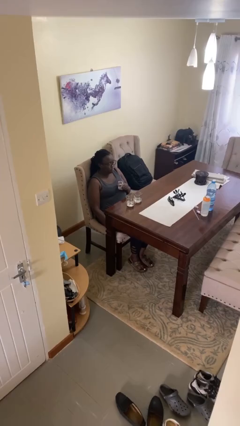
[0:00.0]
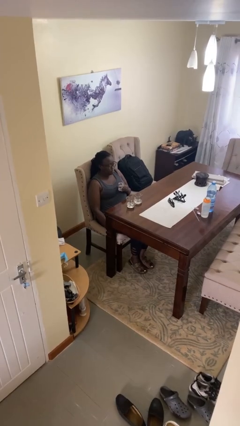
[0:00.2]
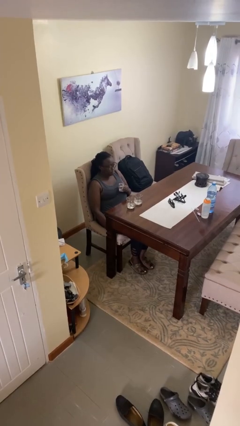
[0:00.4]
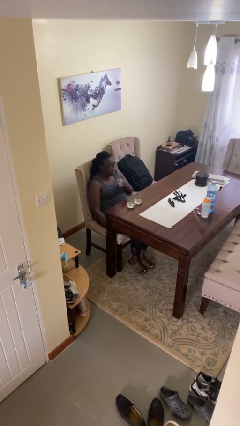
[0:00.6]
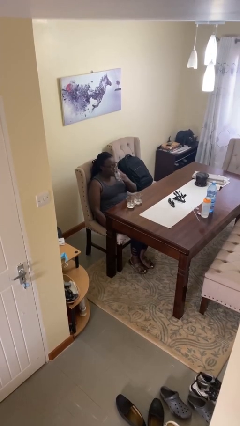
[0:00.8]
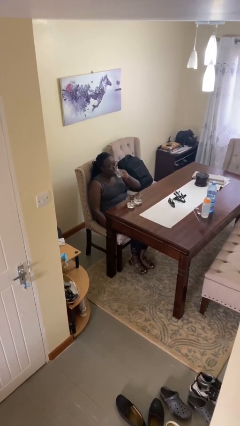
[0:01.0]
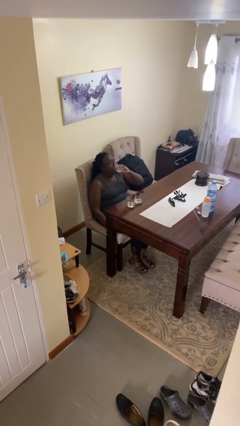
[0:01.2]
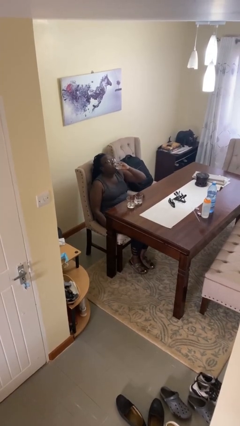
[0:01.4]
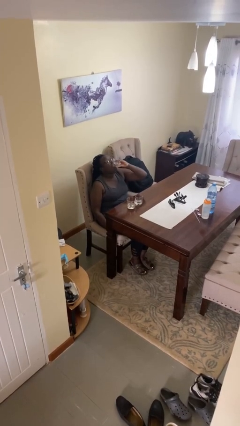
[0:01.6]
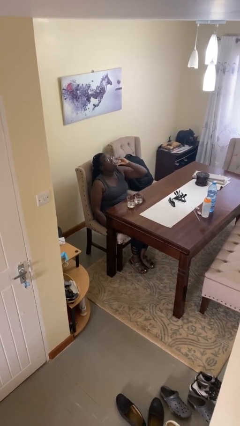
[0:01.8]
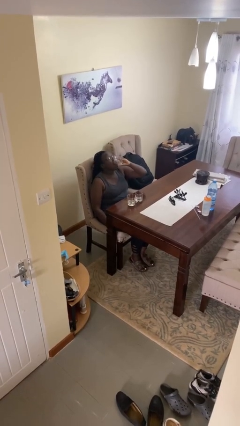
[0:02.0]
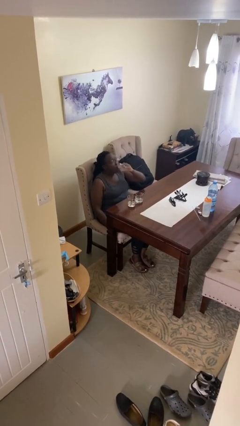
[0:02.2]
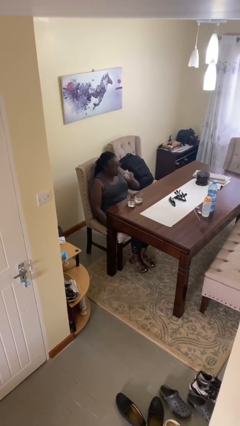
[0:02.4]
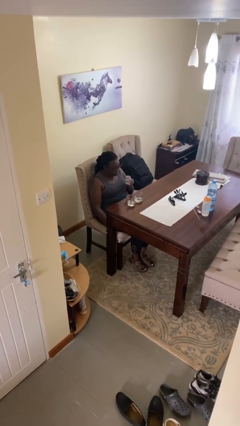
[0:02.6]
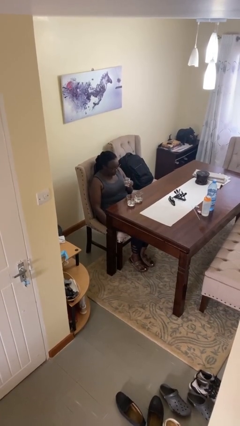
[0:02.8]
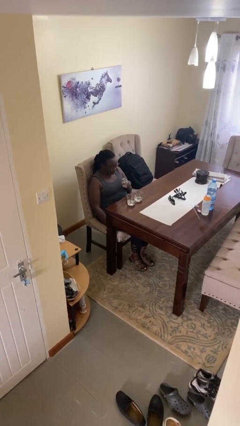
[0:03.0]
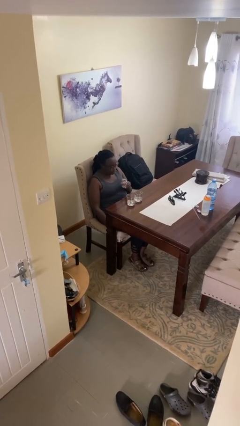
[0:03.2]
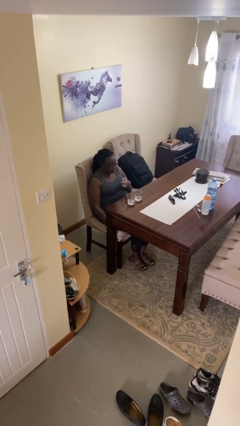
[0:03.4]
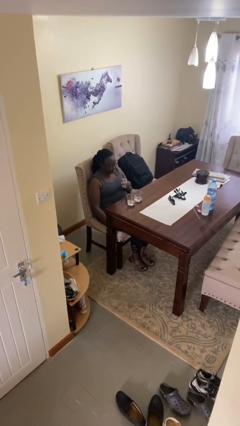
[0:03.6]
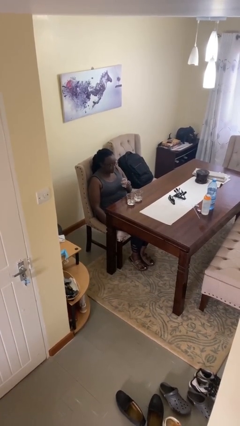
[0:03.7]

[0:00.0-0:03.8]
person drinks from shotglass

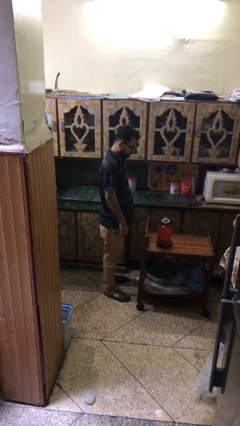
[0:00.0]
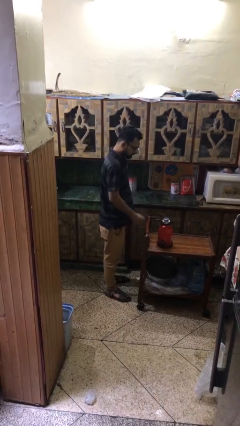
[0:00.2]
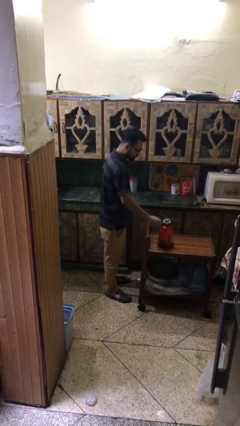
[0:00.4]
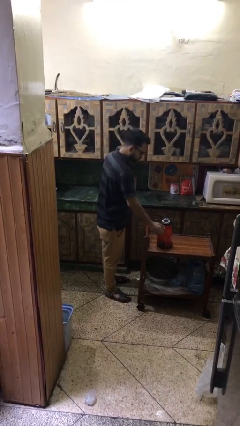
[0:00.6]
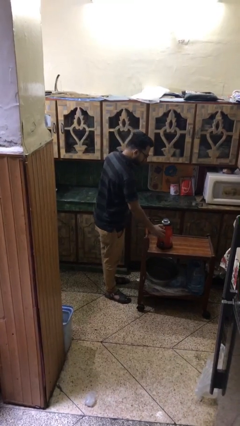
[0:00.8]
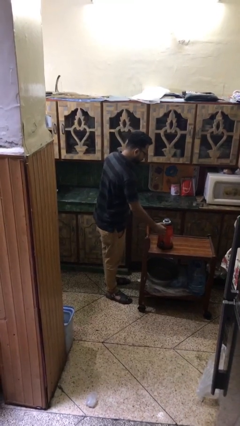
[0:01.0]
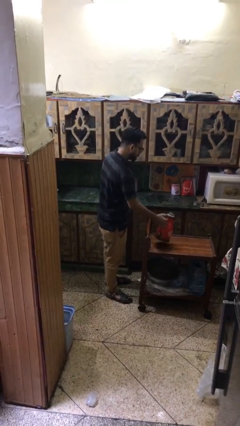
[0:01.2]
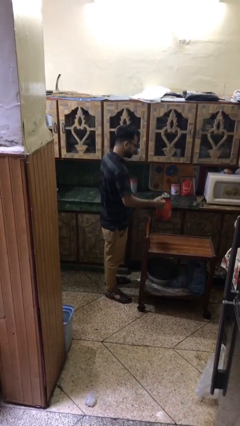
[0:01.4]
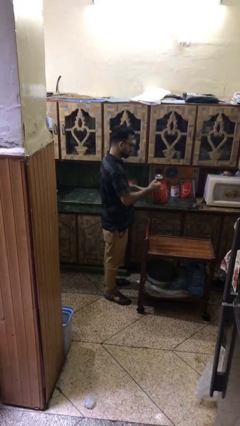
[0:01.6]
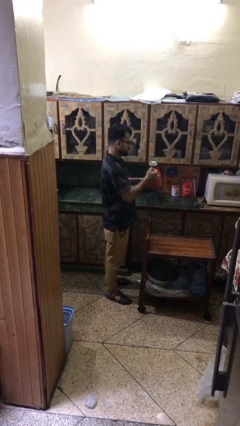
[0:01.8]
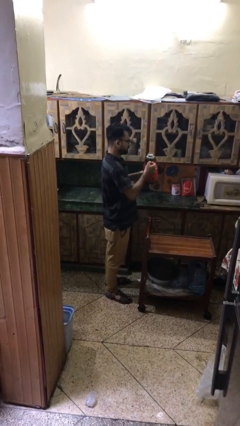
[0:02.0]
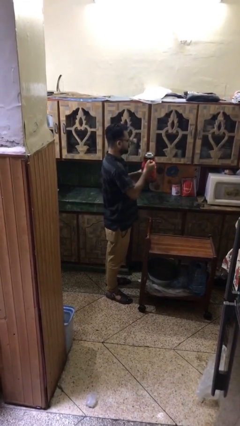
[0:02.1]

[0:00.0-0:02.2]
person picks up object from table

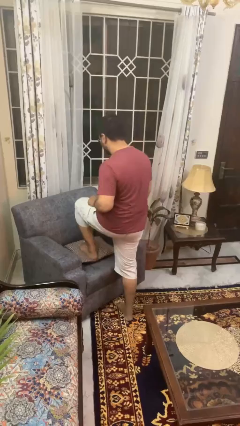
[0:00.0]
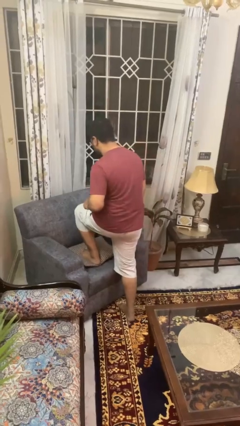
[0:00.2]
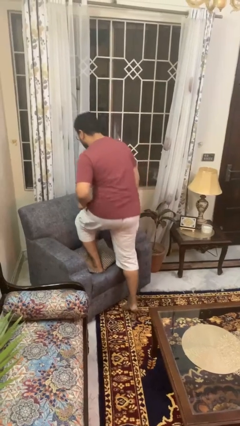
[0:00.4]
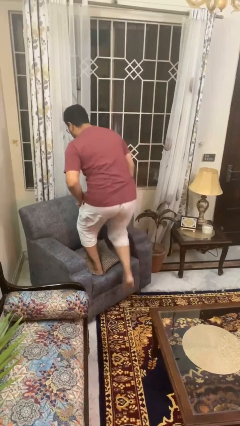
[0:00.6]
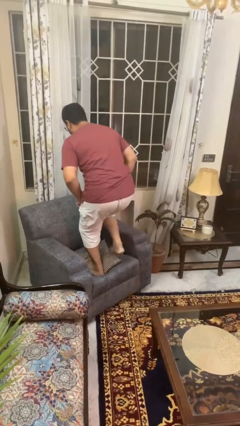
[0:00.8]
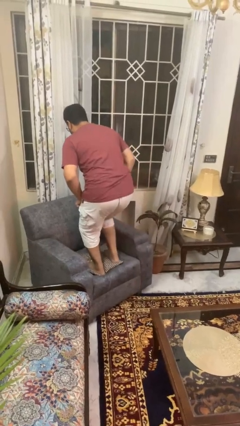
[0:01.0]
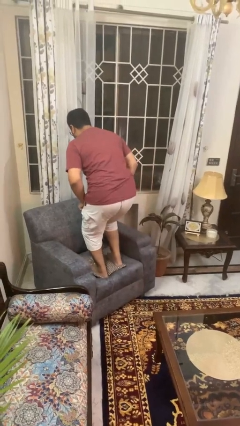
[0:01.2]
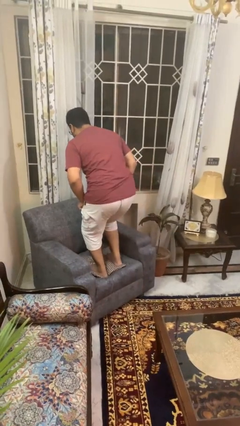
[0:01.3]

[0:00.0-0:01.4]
person climbs on couch

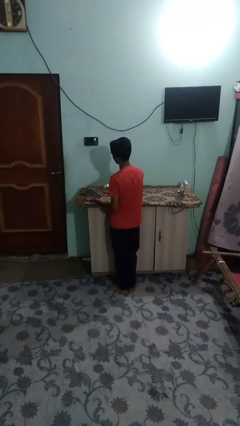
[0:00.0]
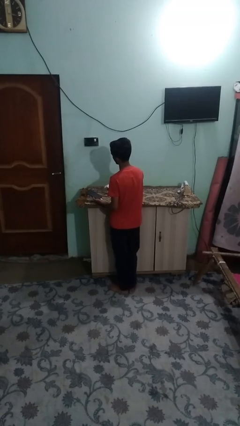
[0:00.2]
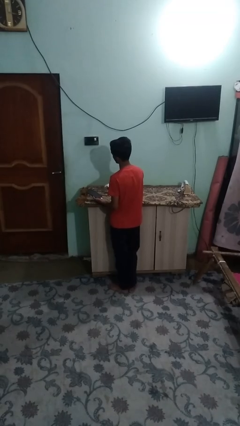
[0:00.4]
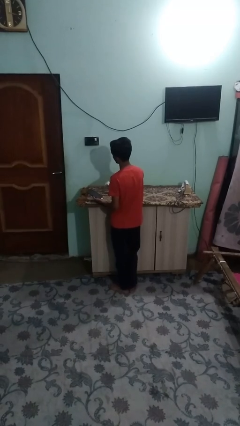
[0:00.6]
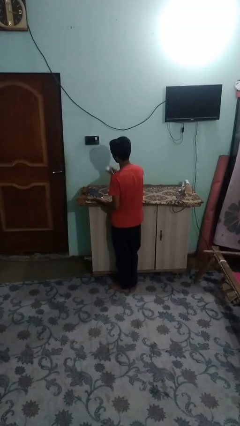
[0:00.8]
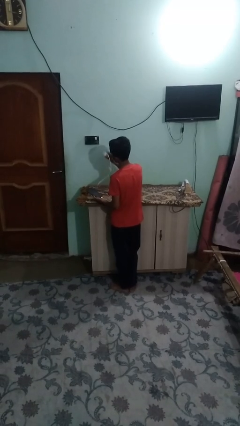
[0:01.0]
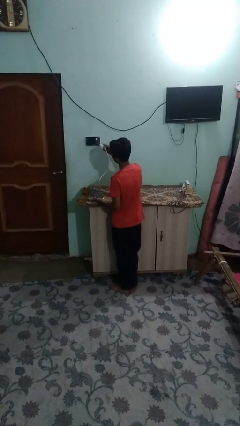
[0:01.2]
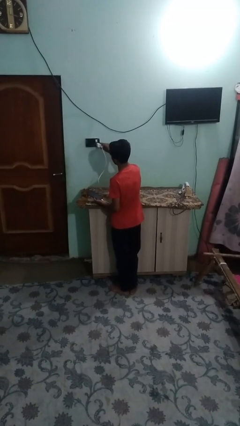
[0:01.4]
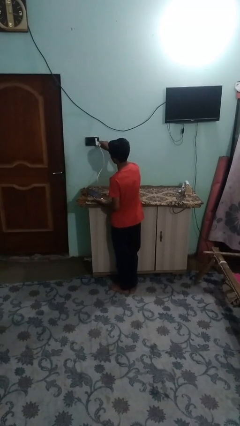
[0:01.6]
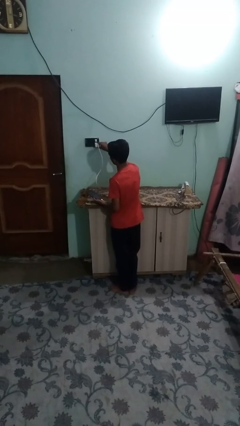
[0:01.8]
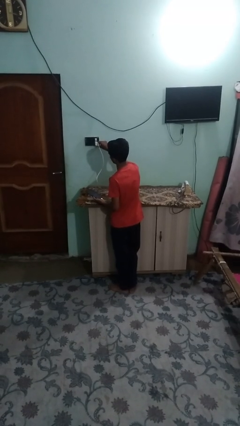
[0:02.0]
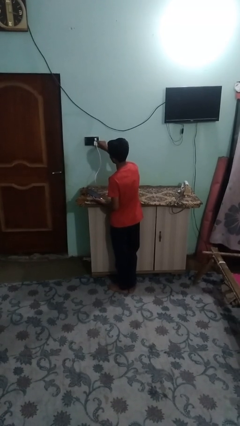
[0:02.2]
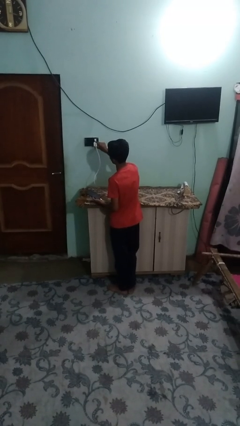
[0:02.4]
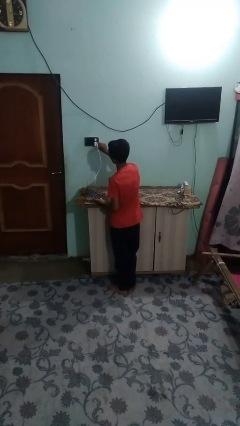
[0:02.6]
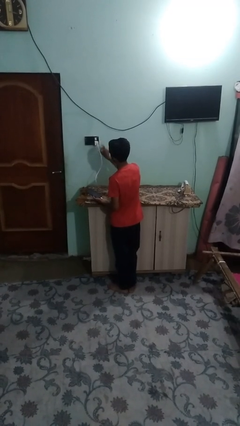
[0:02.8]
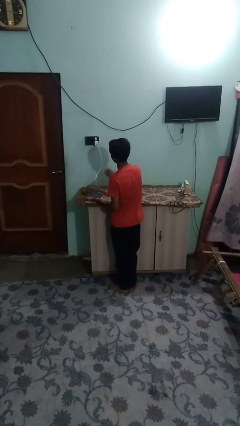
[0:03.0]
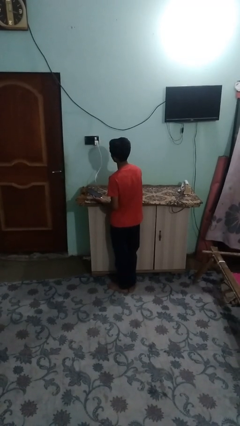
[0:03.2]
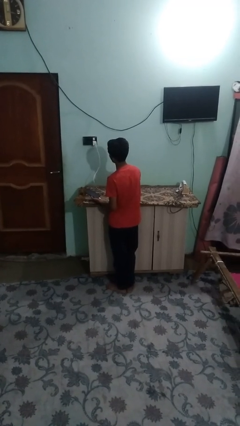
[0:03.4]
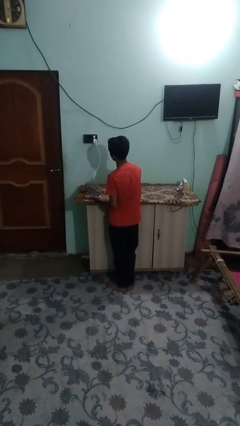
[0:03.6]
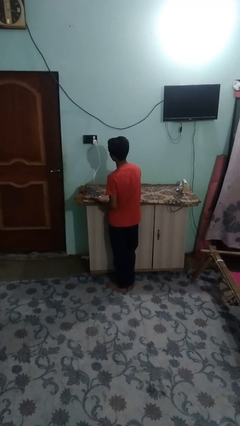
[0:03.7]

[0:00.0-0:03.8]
person plugs into electrical socket

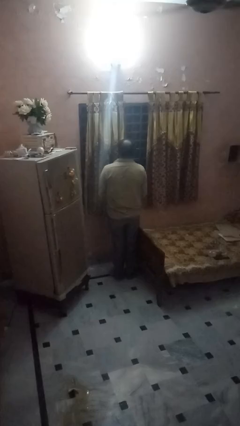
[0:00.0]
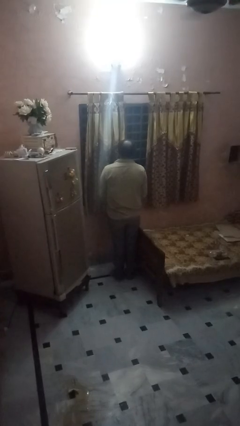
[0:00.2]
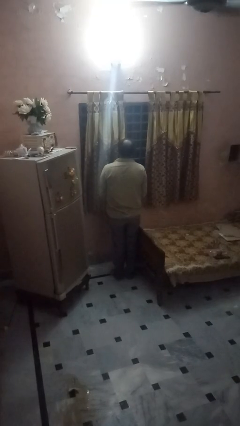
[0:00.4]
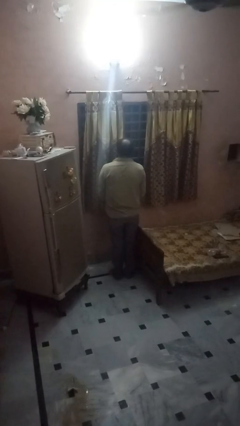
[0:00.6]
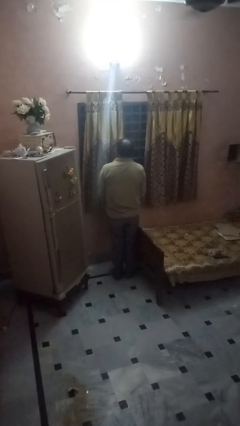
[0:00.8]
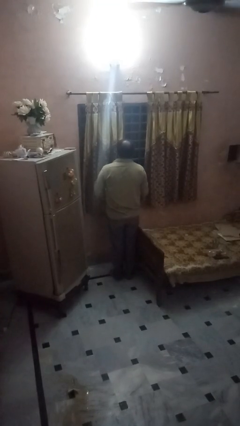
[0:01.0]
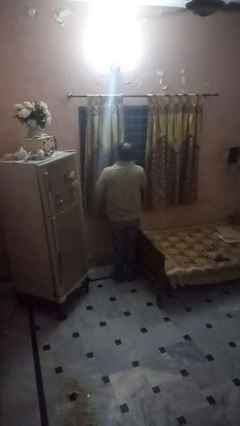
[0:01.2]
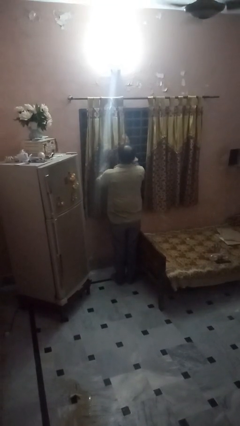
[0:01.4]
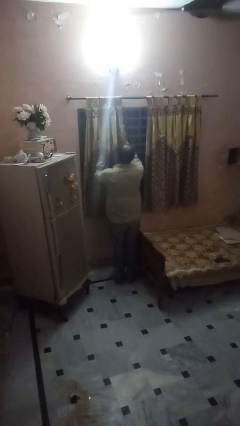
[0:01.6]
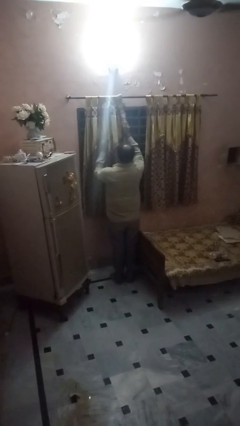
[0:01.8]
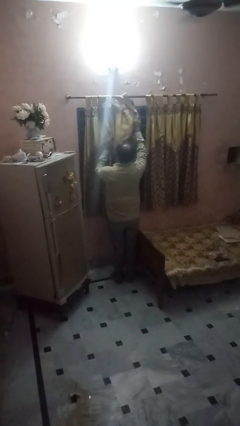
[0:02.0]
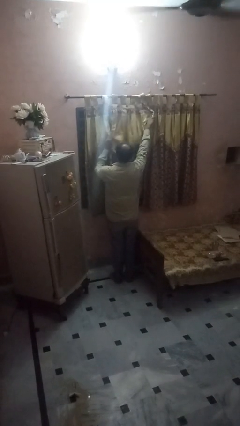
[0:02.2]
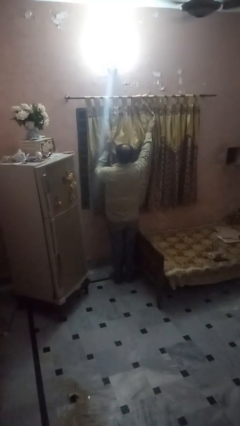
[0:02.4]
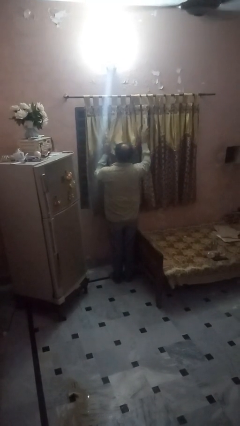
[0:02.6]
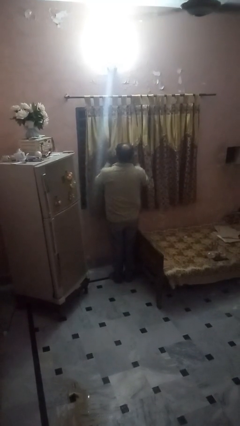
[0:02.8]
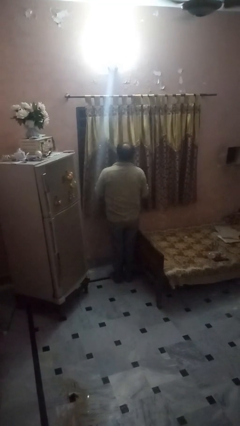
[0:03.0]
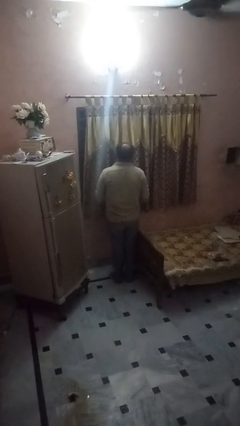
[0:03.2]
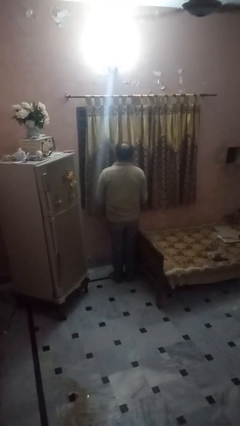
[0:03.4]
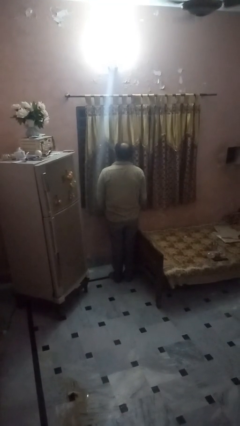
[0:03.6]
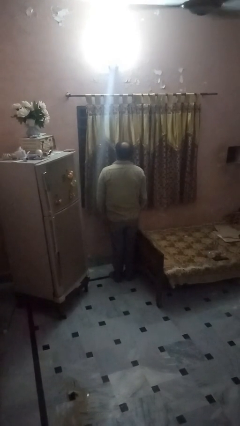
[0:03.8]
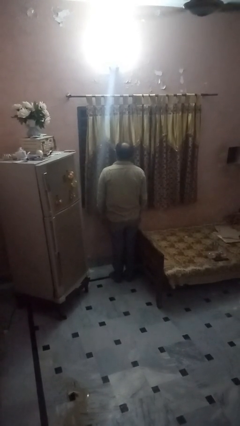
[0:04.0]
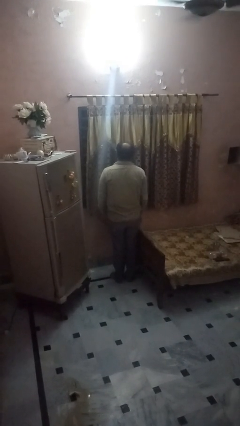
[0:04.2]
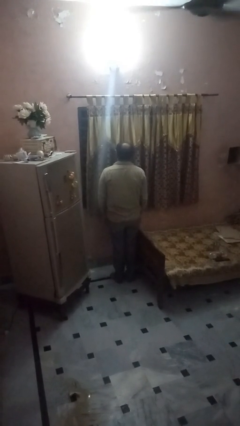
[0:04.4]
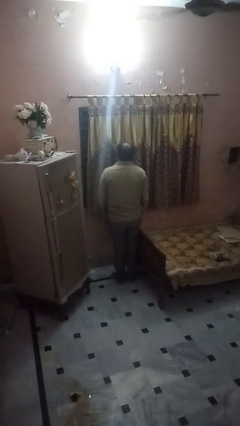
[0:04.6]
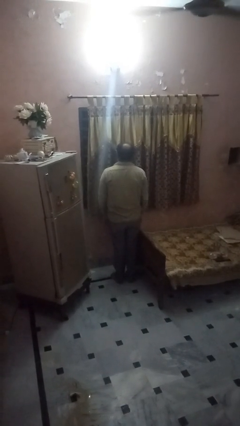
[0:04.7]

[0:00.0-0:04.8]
person closes curtains

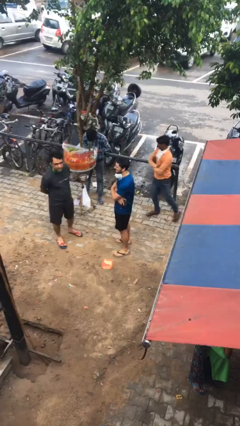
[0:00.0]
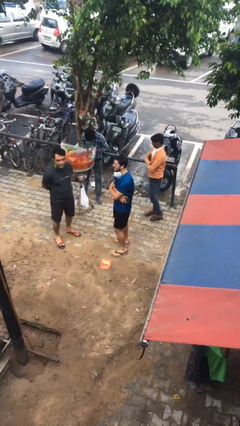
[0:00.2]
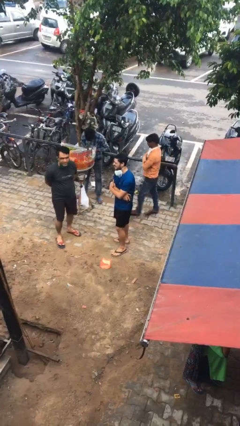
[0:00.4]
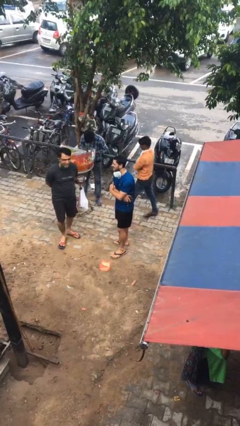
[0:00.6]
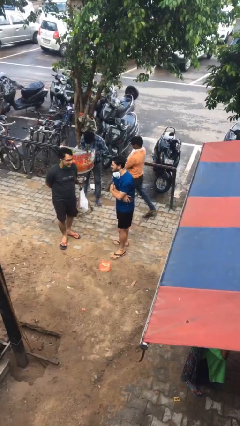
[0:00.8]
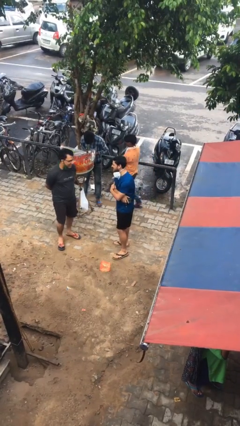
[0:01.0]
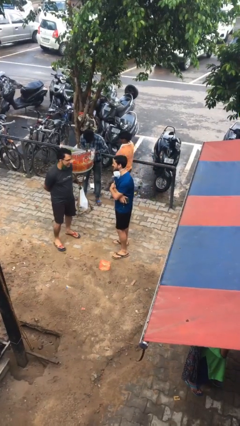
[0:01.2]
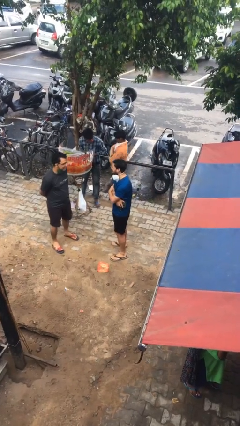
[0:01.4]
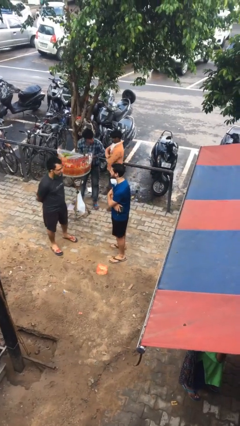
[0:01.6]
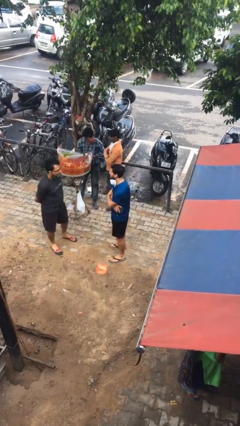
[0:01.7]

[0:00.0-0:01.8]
person laughs with person
